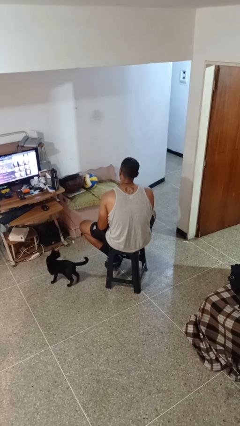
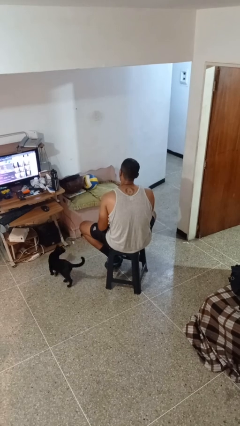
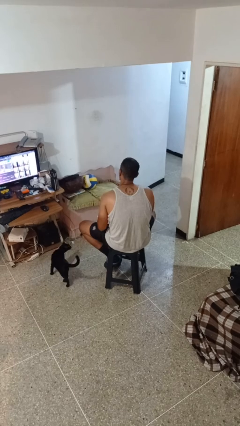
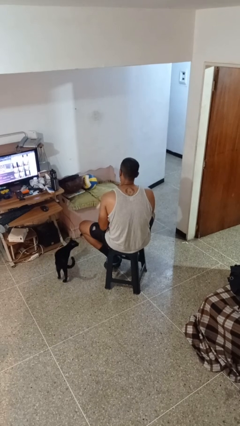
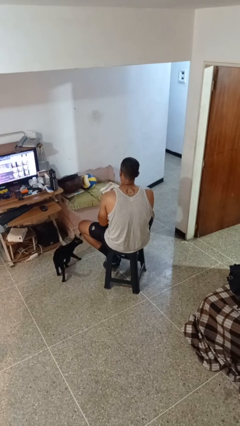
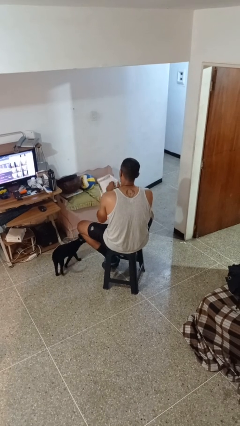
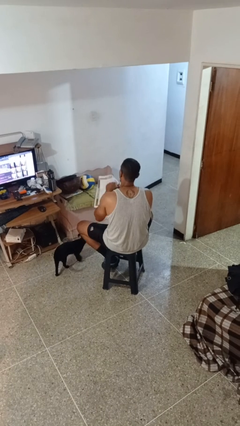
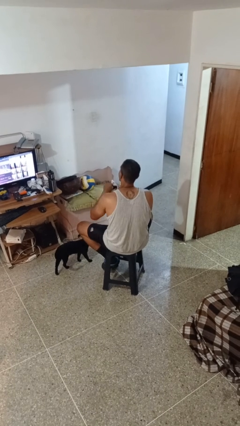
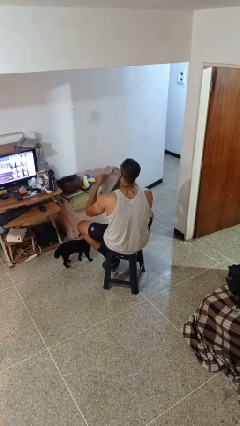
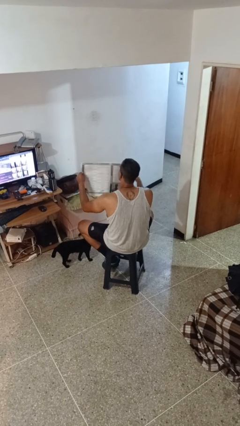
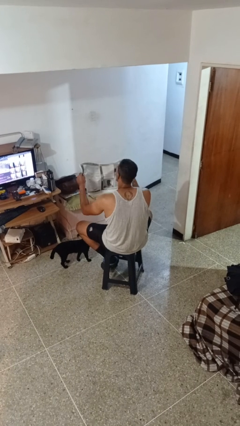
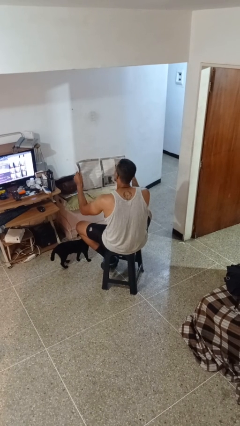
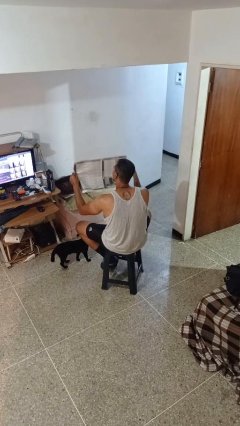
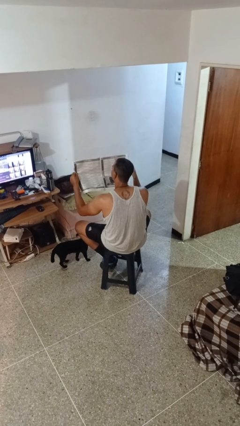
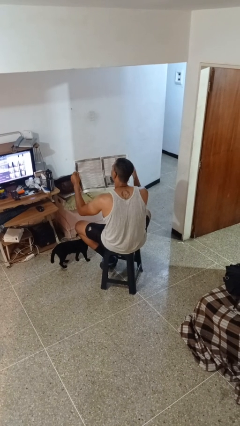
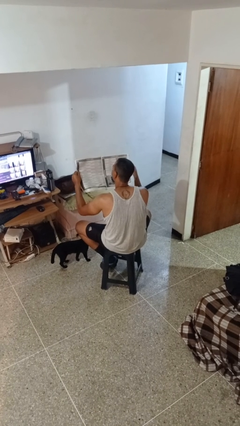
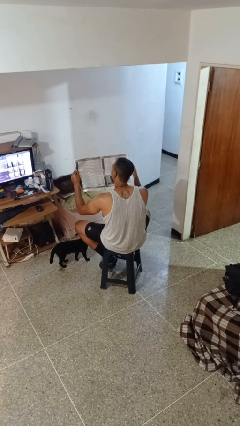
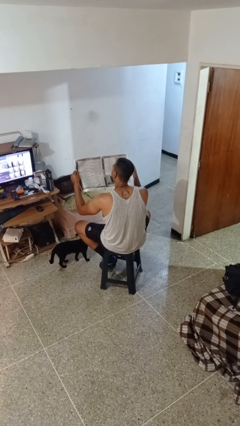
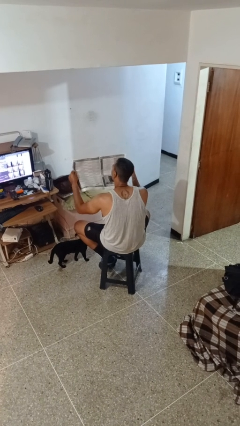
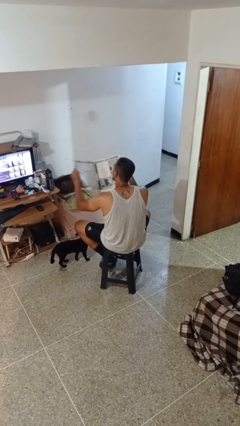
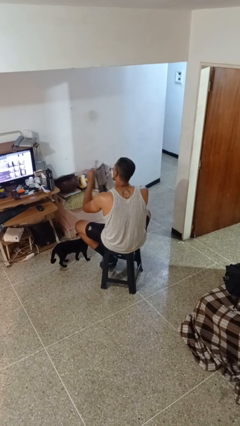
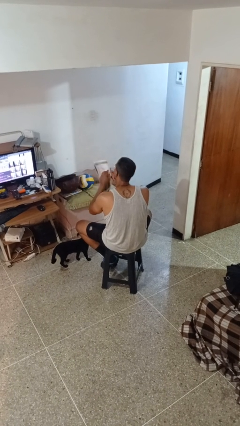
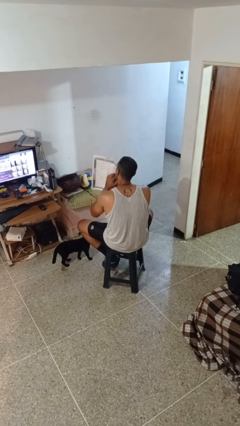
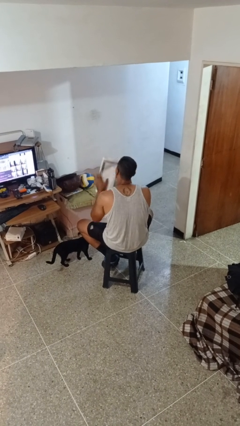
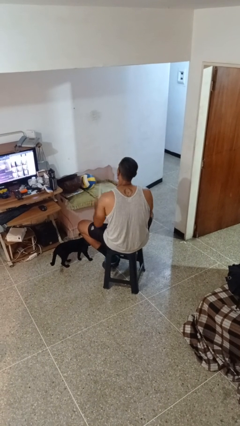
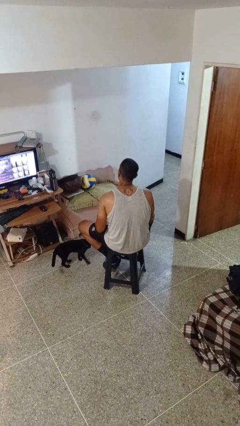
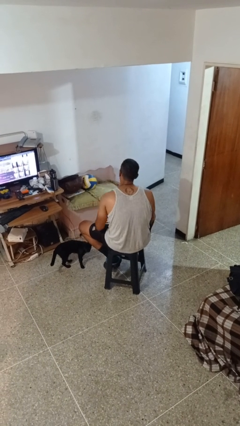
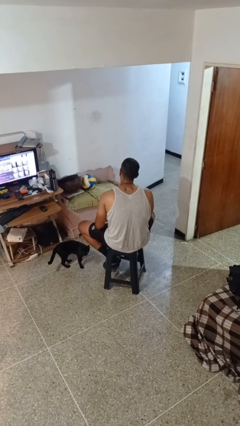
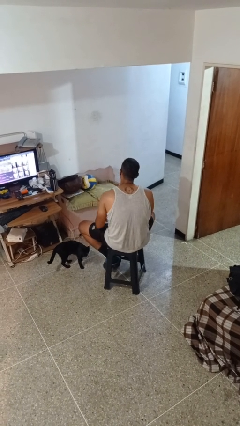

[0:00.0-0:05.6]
person reads newspaper

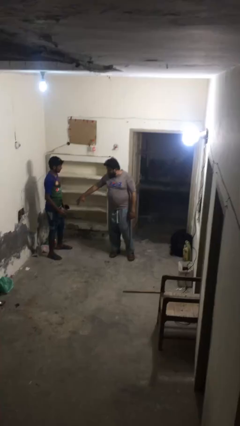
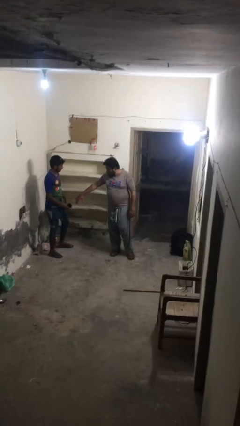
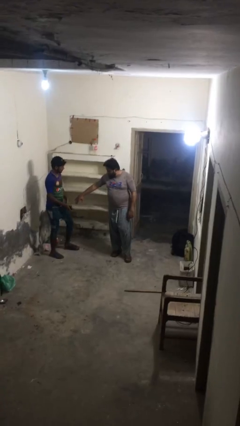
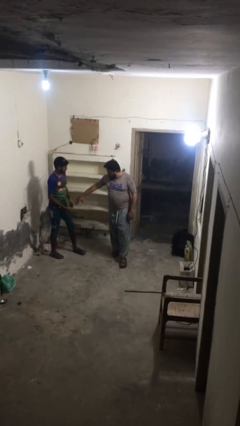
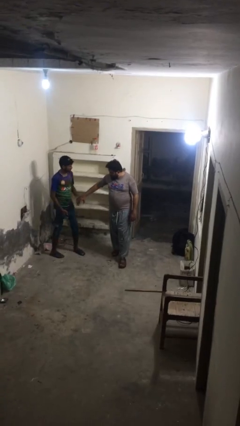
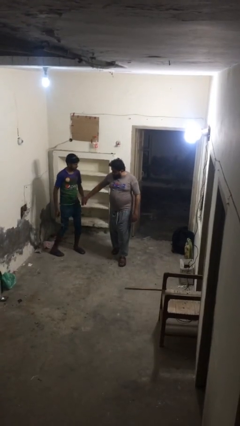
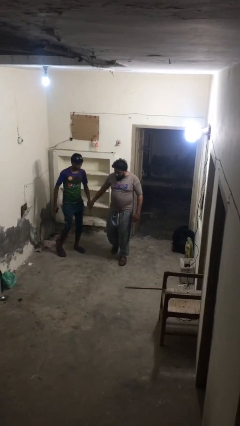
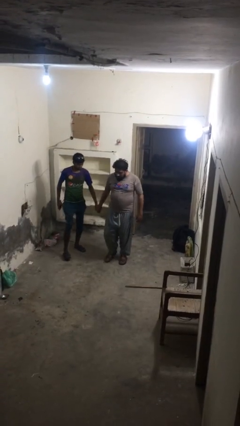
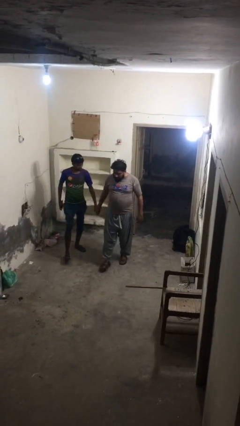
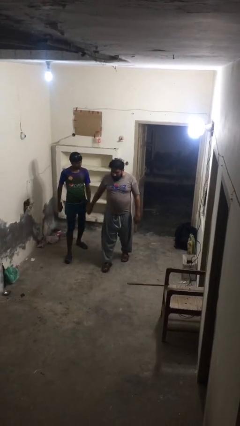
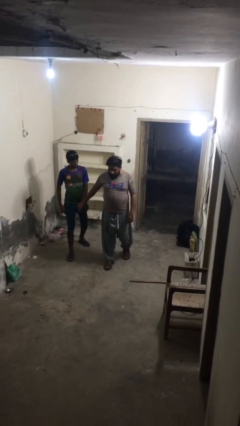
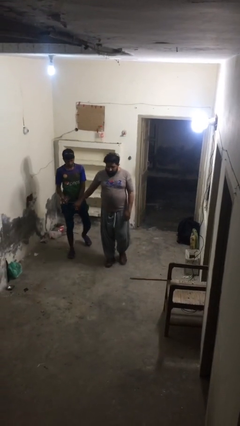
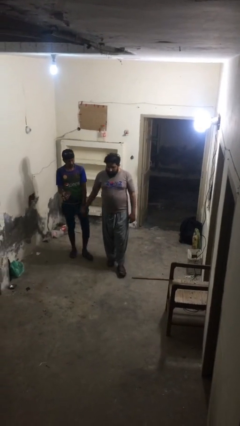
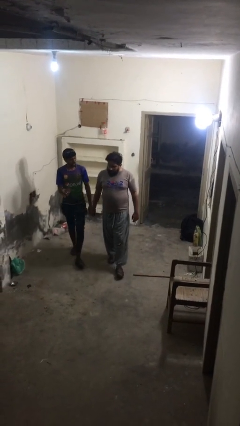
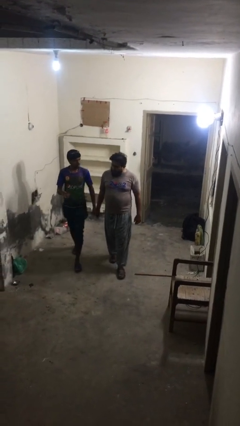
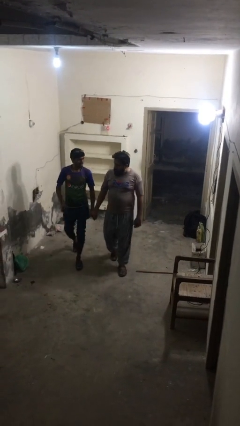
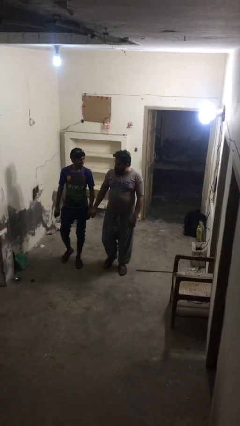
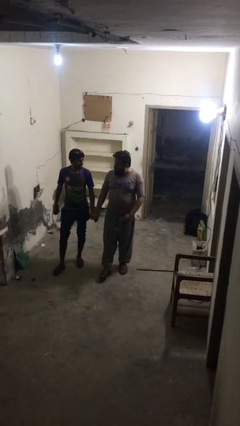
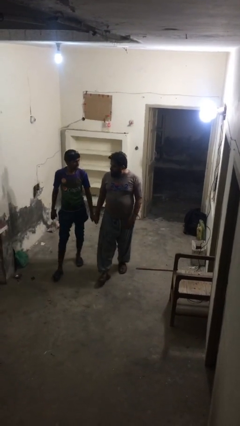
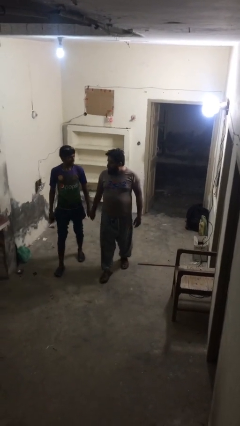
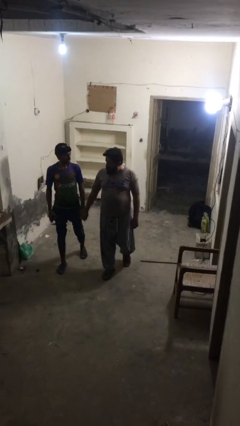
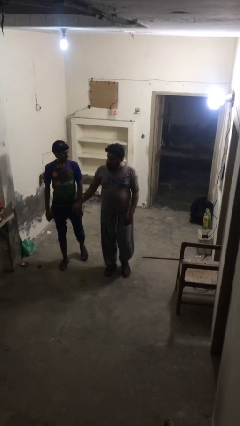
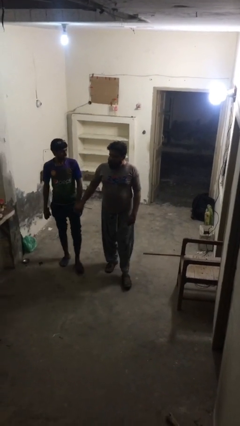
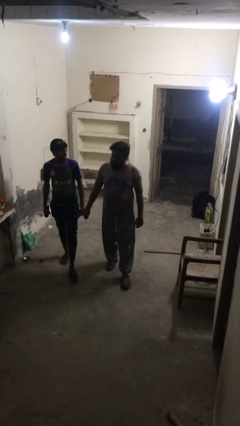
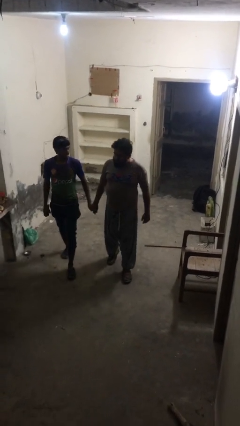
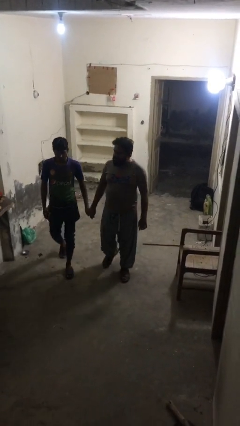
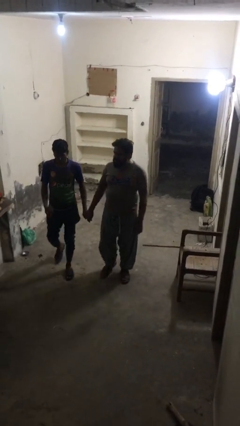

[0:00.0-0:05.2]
person holds hand

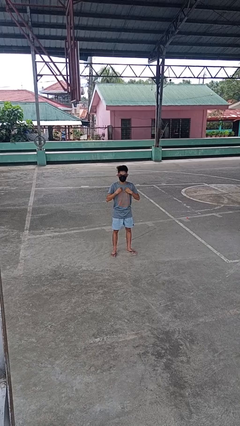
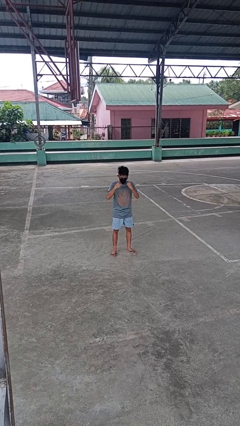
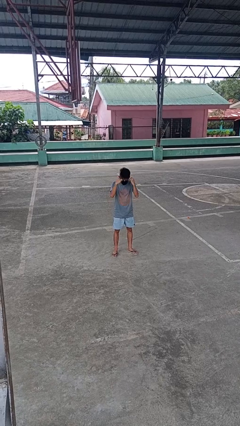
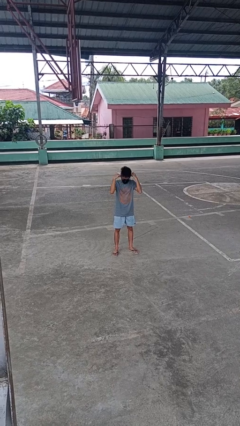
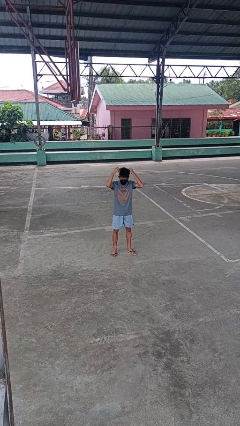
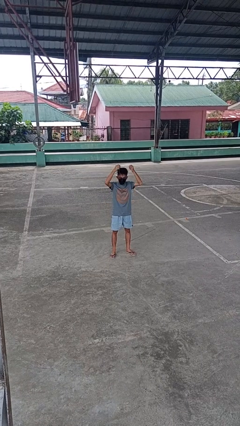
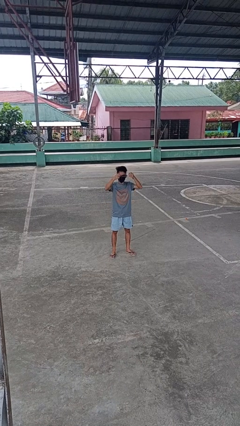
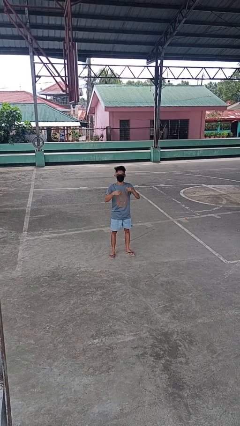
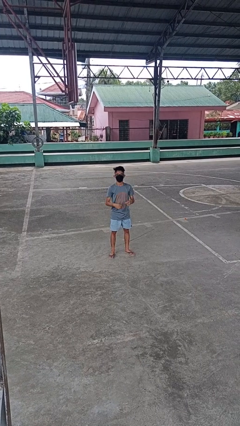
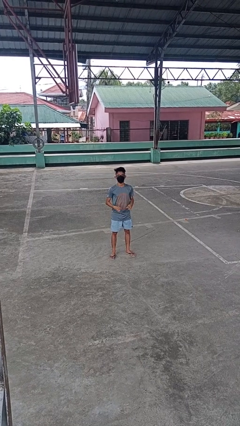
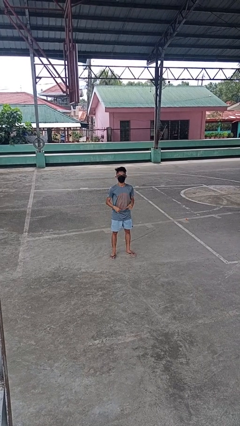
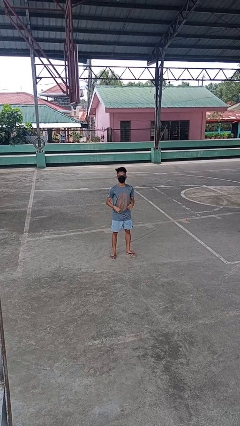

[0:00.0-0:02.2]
person takes off necklace

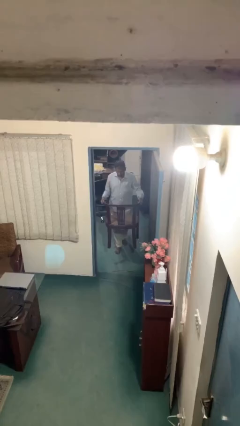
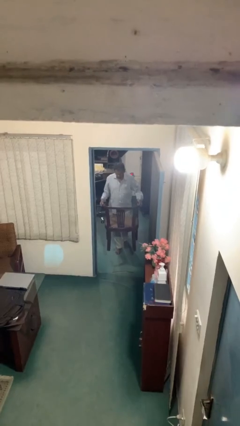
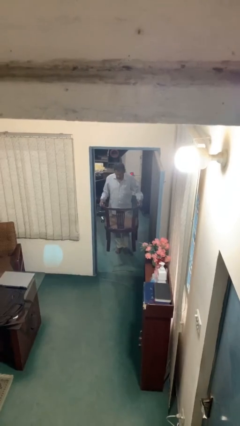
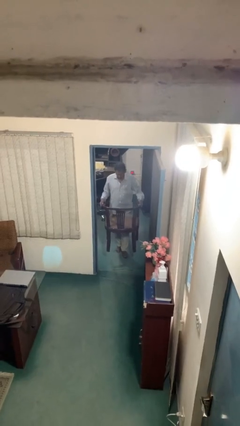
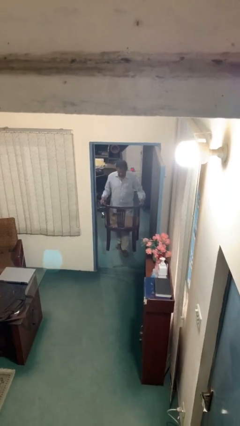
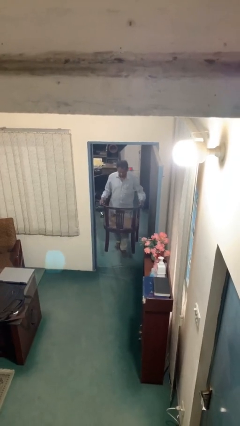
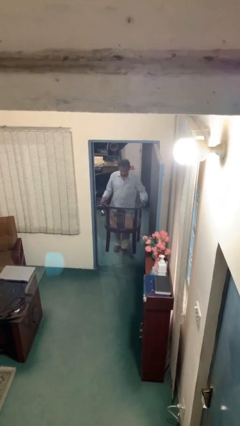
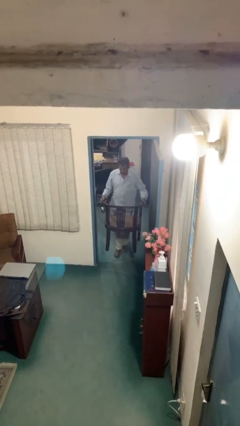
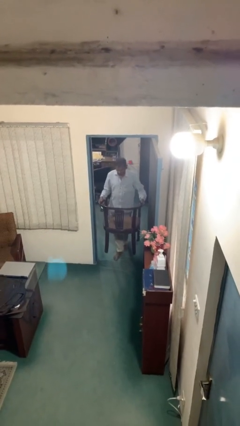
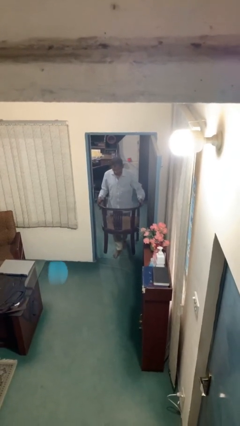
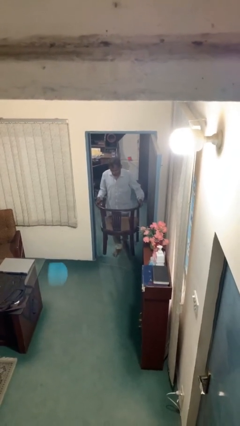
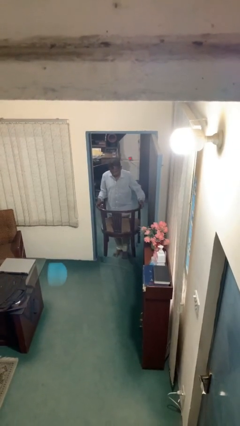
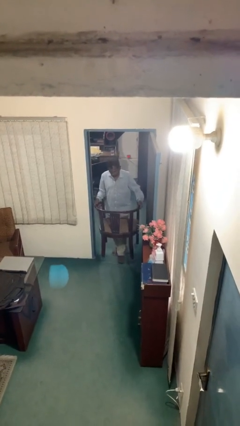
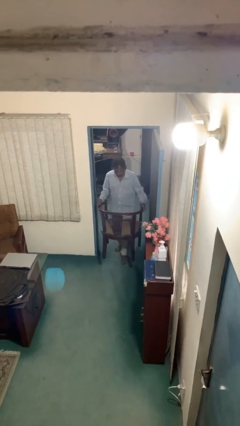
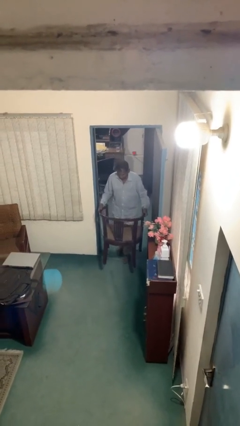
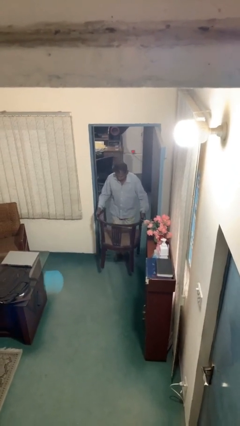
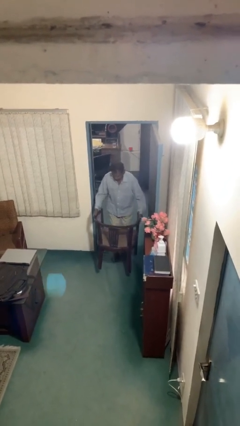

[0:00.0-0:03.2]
person carries heavy object

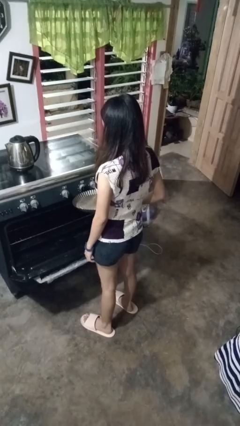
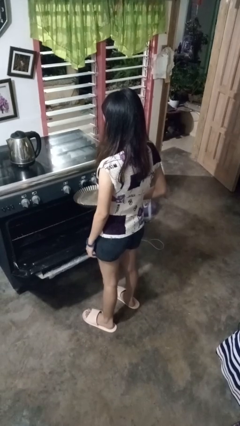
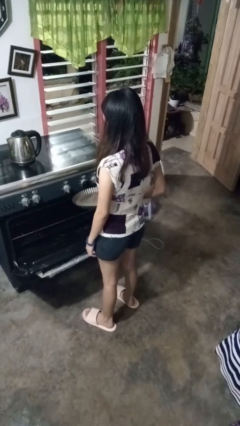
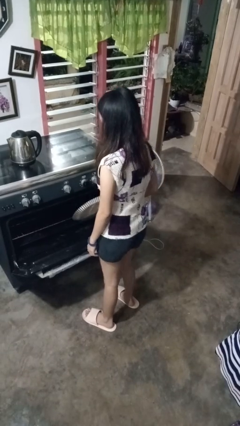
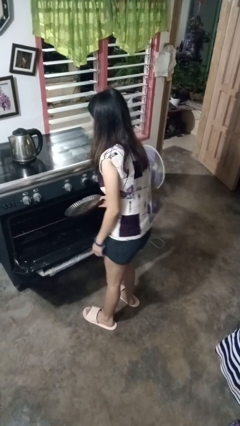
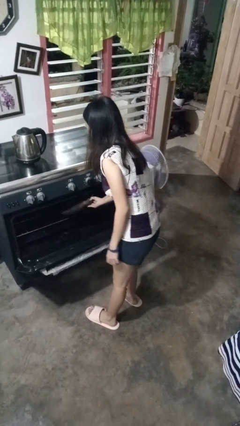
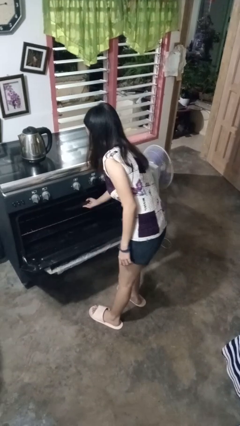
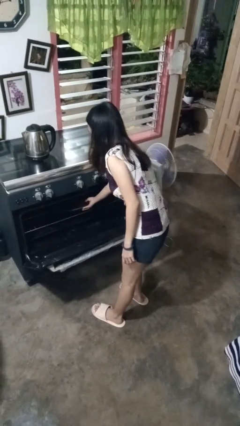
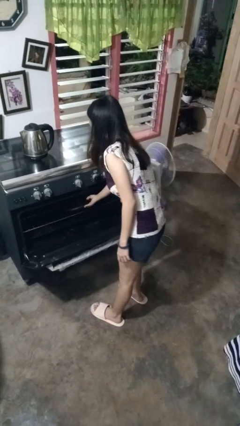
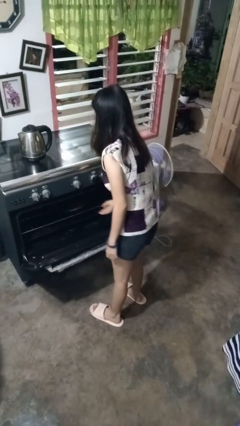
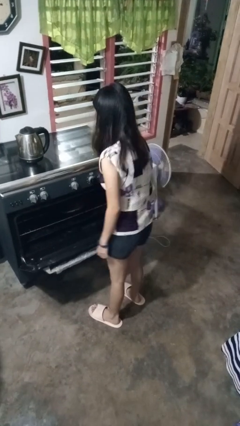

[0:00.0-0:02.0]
person puts object into oven
